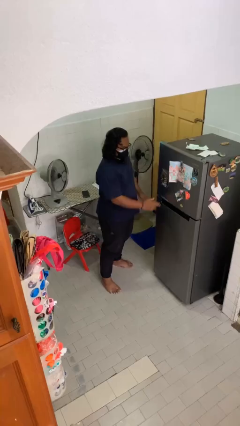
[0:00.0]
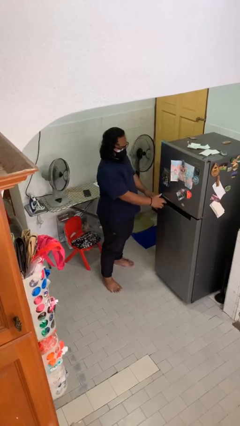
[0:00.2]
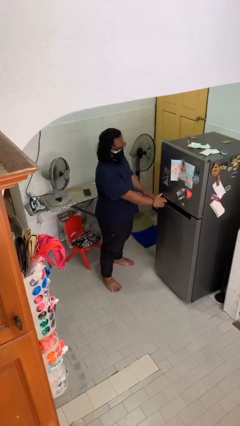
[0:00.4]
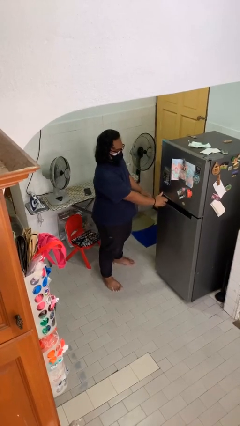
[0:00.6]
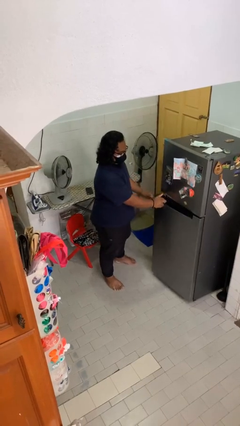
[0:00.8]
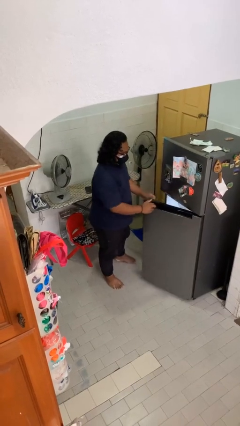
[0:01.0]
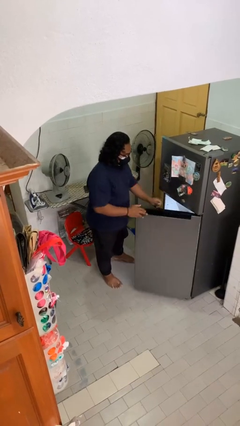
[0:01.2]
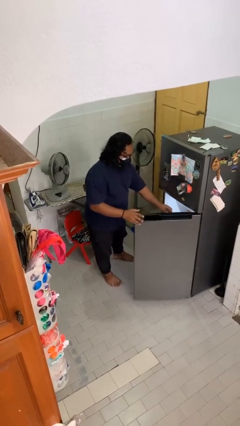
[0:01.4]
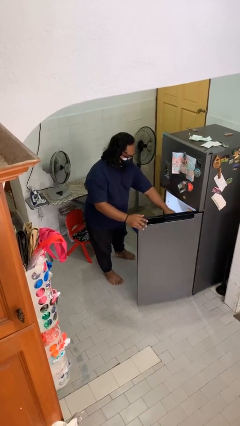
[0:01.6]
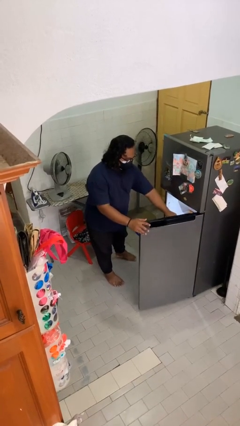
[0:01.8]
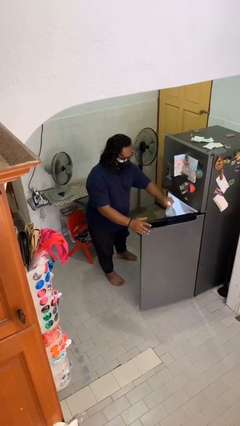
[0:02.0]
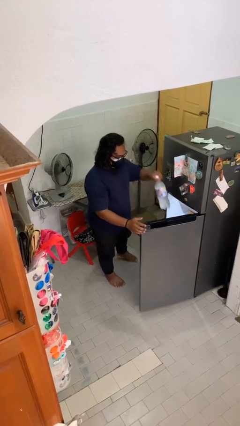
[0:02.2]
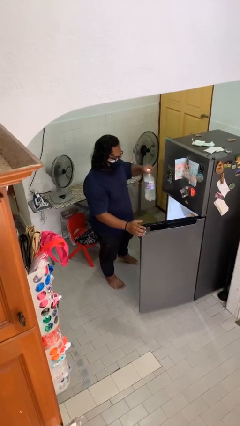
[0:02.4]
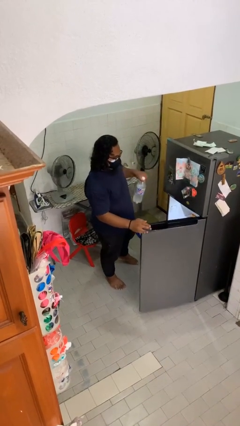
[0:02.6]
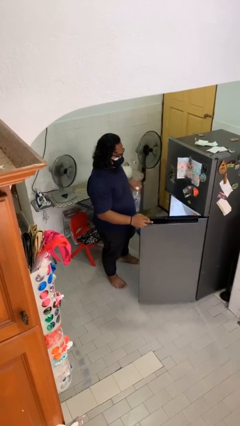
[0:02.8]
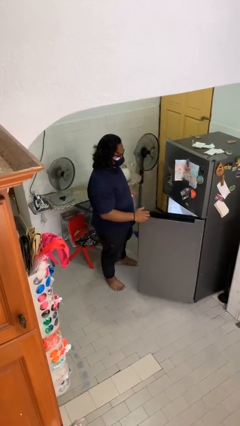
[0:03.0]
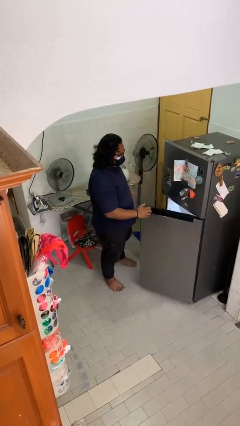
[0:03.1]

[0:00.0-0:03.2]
person takes object from refrigerator

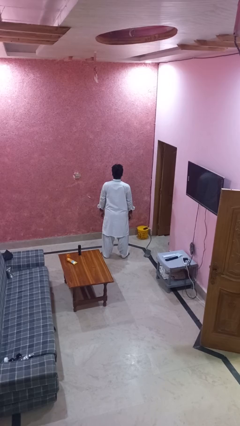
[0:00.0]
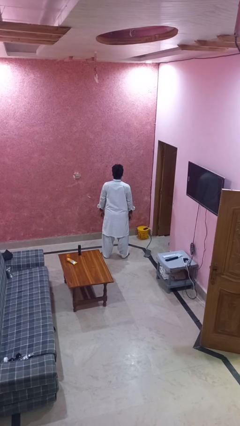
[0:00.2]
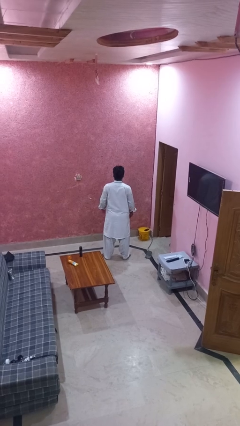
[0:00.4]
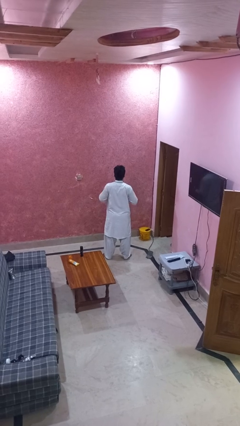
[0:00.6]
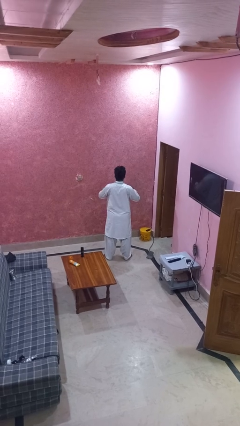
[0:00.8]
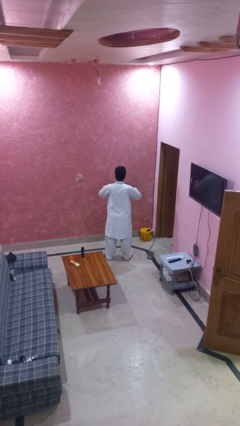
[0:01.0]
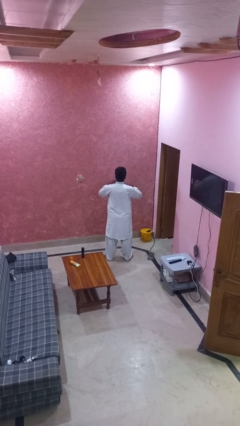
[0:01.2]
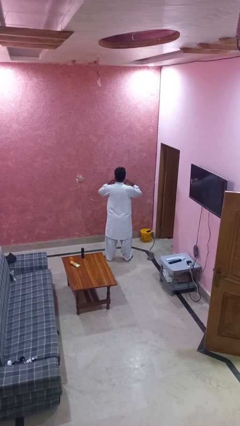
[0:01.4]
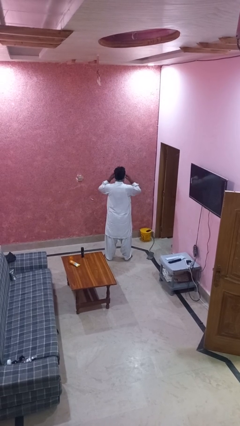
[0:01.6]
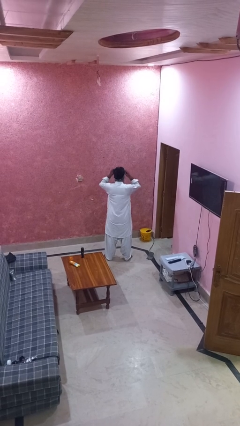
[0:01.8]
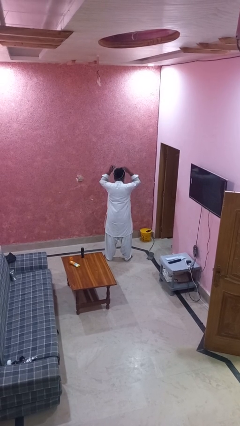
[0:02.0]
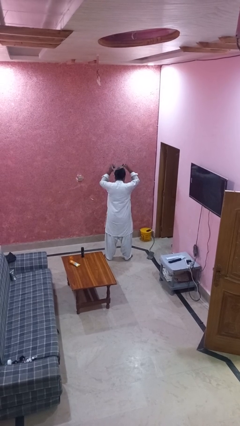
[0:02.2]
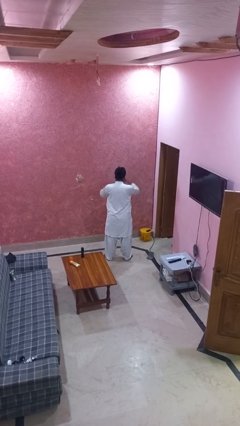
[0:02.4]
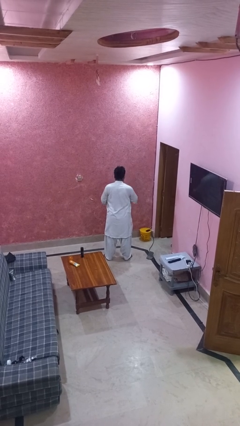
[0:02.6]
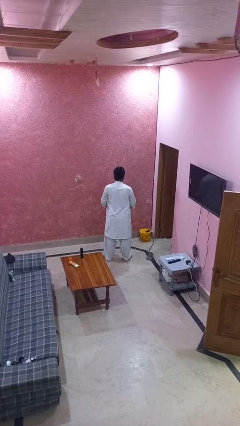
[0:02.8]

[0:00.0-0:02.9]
person takes off necklace

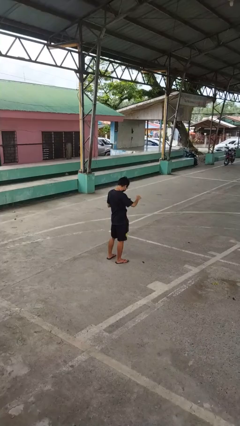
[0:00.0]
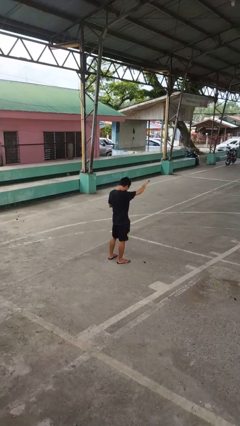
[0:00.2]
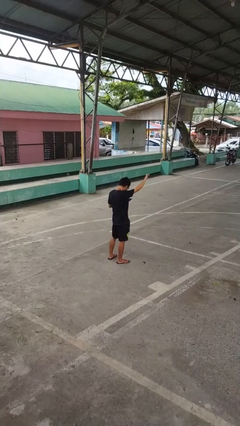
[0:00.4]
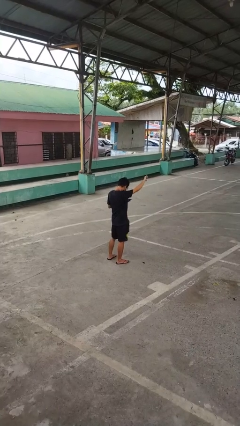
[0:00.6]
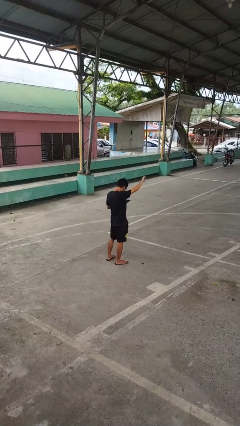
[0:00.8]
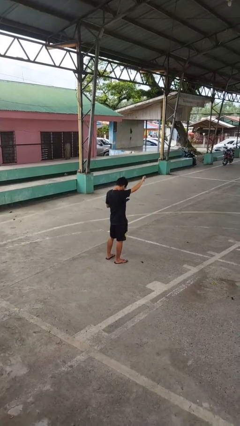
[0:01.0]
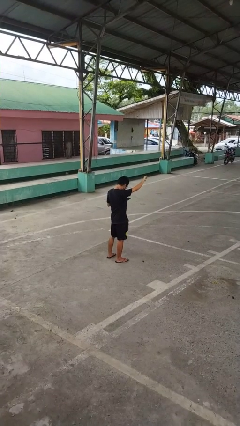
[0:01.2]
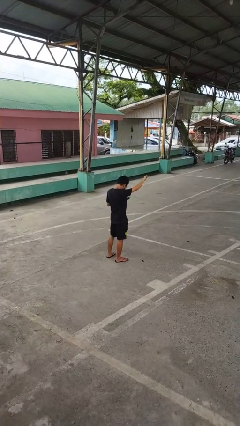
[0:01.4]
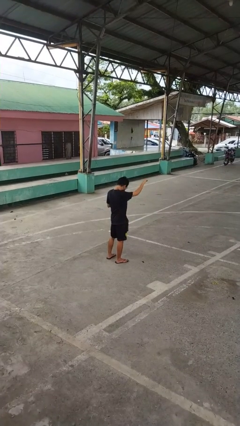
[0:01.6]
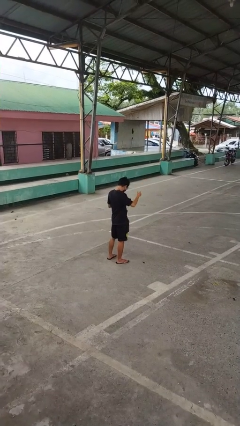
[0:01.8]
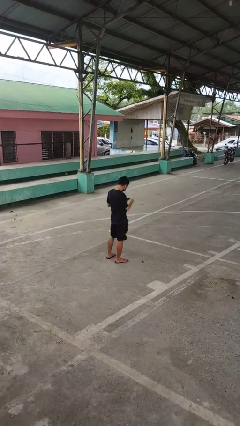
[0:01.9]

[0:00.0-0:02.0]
person gestures thumbs down

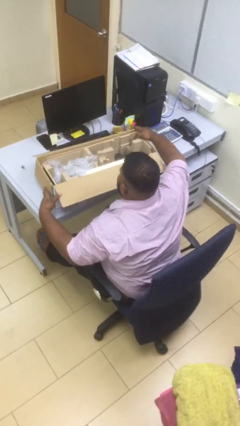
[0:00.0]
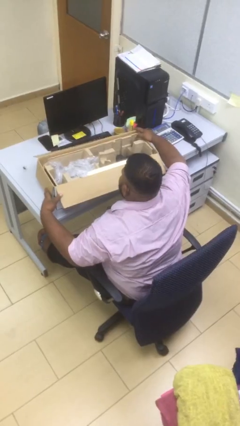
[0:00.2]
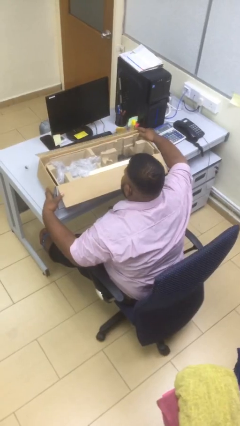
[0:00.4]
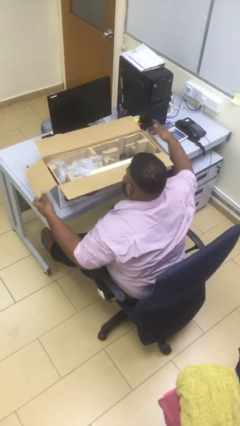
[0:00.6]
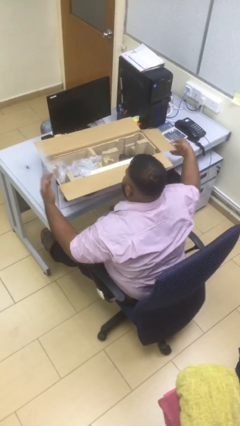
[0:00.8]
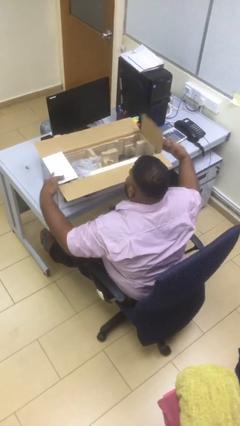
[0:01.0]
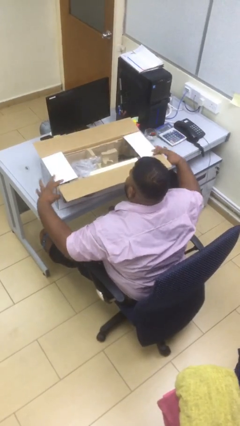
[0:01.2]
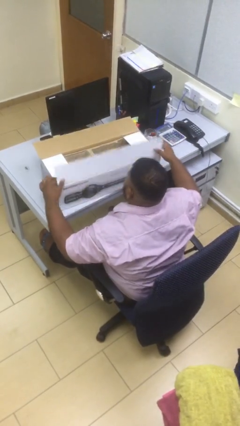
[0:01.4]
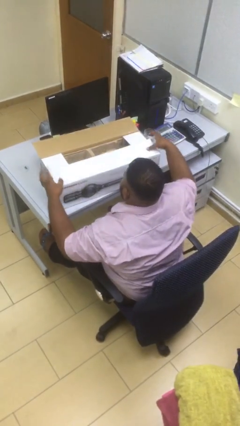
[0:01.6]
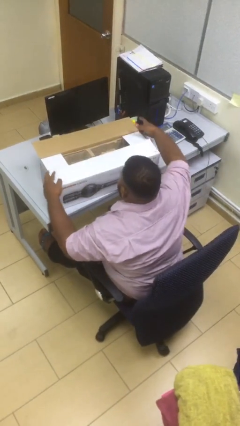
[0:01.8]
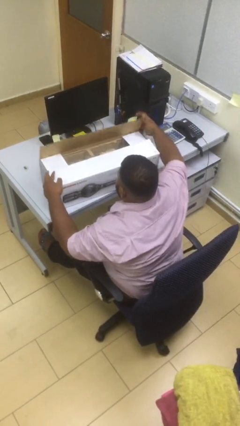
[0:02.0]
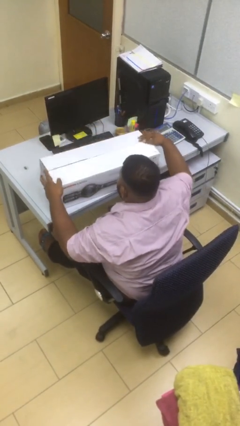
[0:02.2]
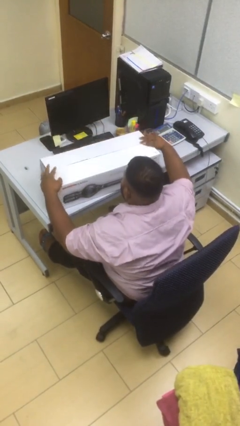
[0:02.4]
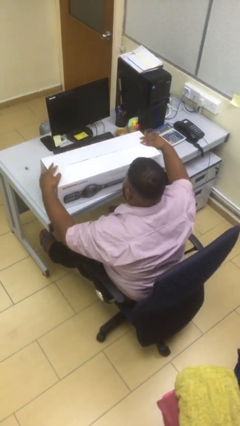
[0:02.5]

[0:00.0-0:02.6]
person closes box

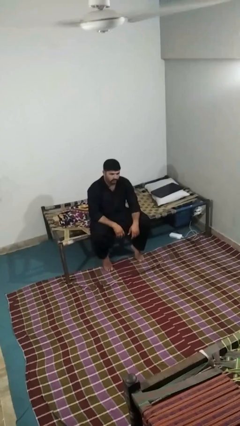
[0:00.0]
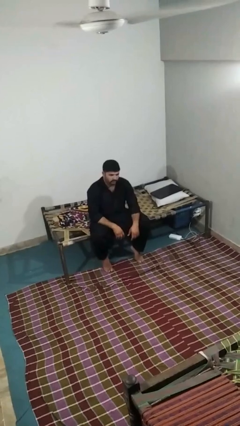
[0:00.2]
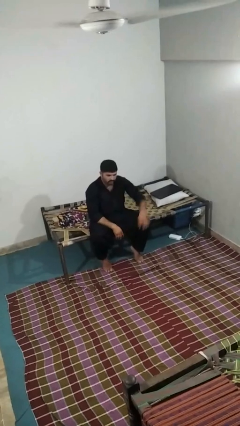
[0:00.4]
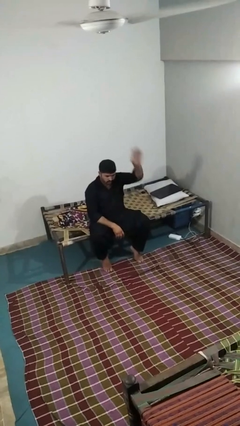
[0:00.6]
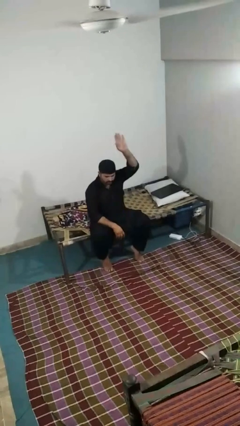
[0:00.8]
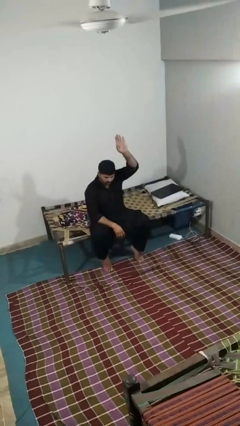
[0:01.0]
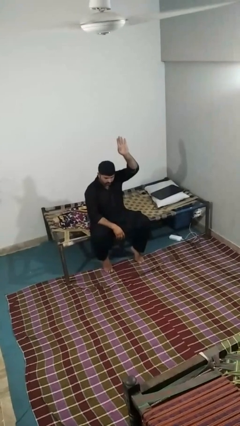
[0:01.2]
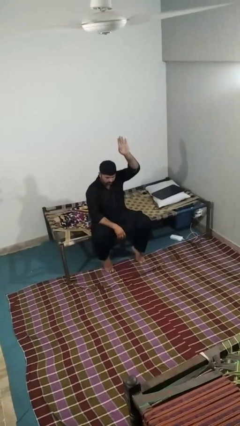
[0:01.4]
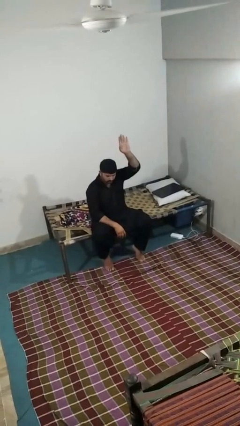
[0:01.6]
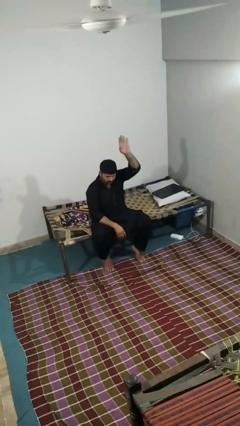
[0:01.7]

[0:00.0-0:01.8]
person gestures raise hand

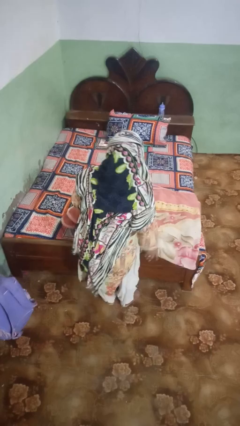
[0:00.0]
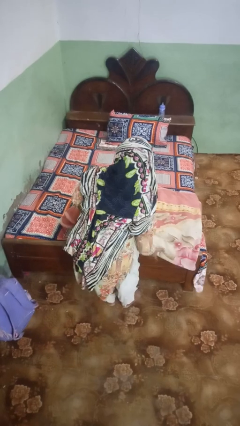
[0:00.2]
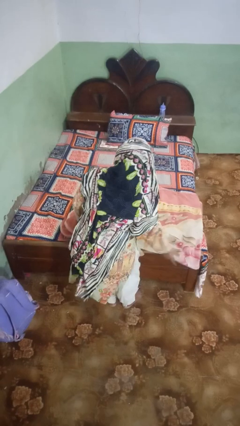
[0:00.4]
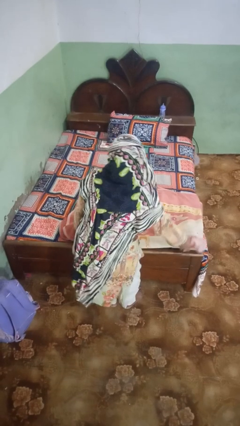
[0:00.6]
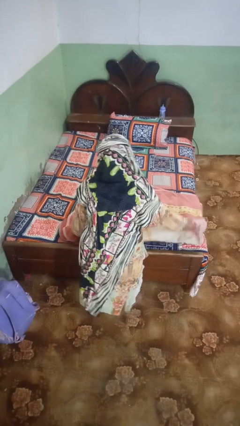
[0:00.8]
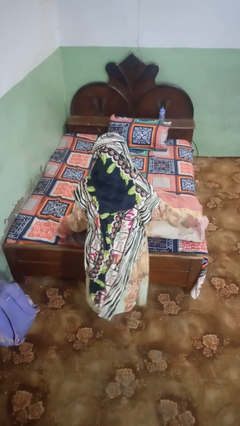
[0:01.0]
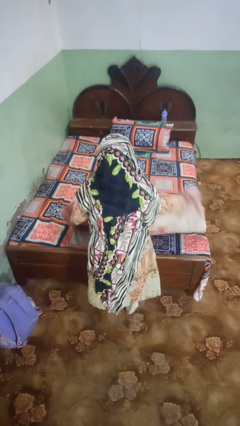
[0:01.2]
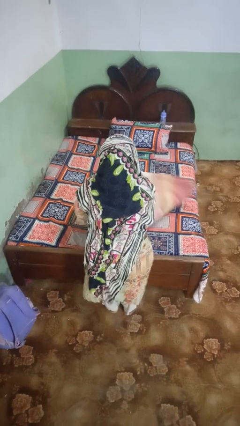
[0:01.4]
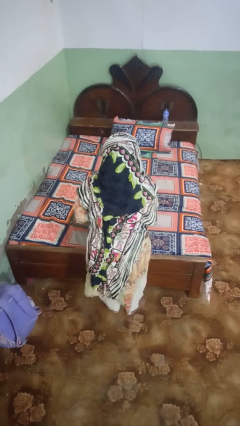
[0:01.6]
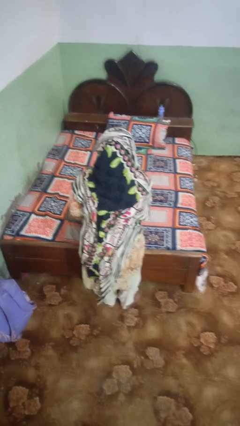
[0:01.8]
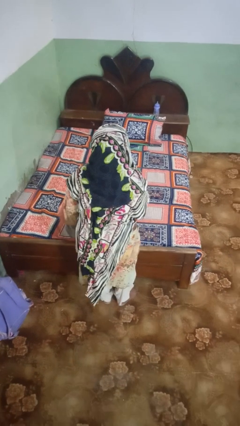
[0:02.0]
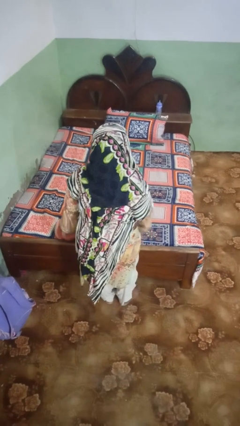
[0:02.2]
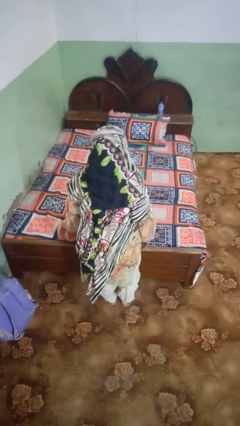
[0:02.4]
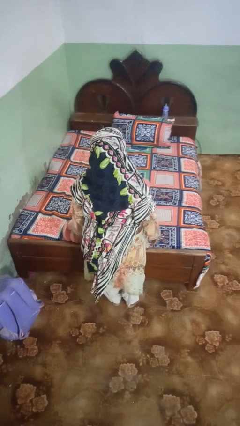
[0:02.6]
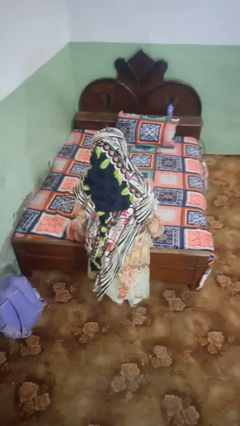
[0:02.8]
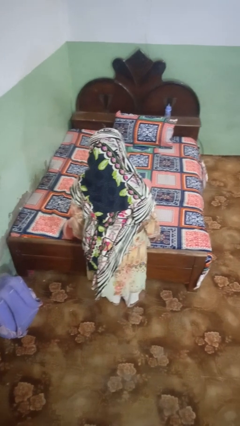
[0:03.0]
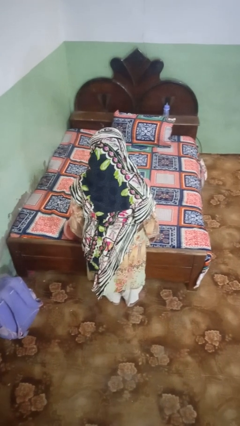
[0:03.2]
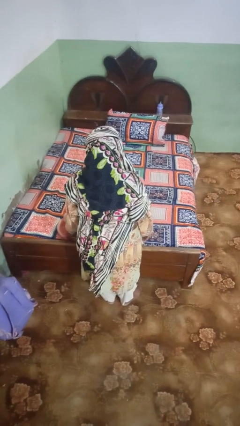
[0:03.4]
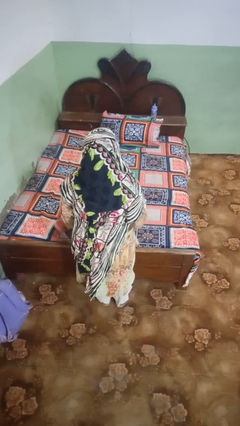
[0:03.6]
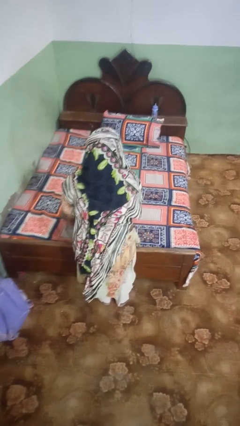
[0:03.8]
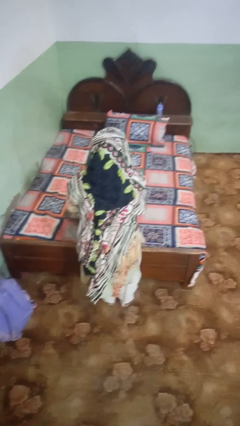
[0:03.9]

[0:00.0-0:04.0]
person folds blanket

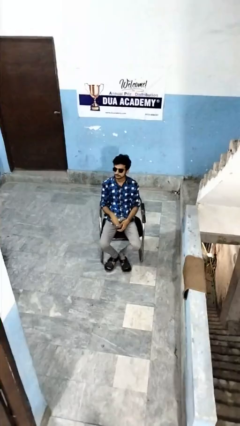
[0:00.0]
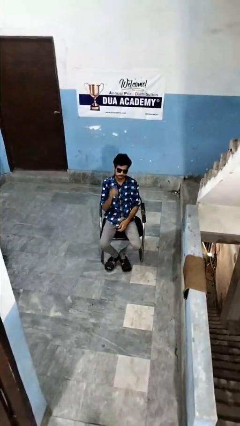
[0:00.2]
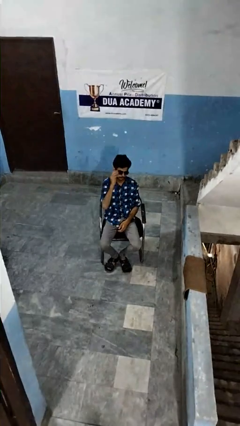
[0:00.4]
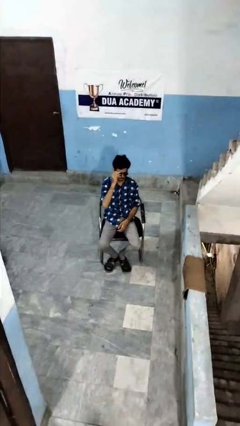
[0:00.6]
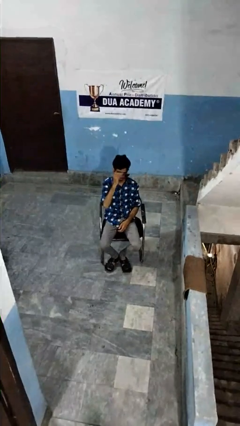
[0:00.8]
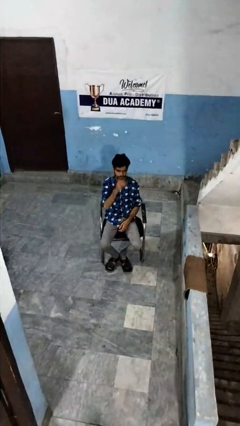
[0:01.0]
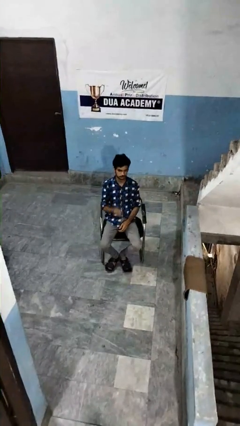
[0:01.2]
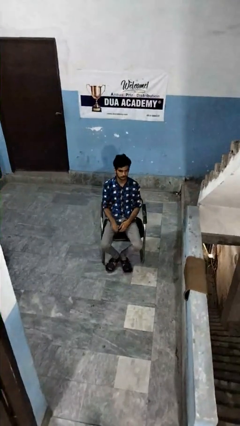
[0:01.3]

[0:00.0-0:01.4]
person takes off sunglasses
